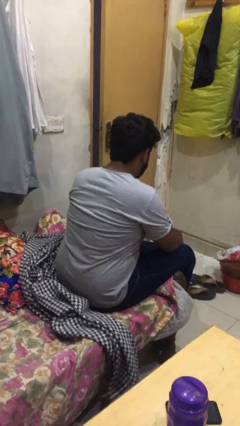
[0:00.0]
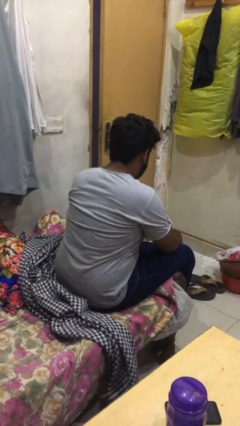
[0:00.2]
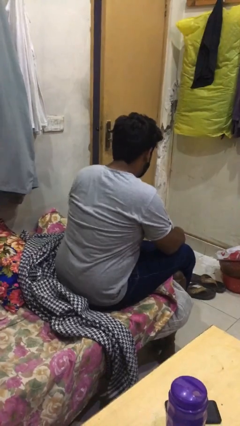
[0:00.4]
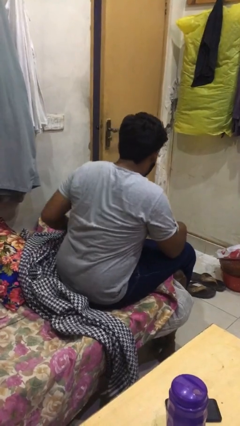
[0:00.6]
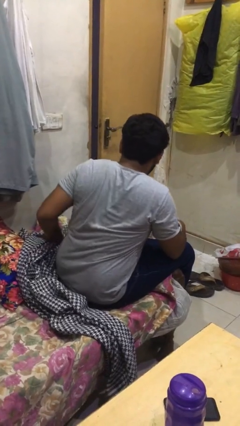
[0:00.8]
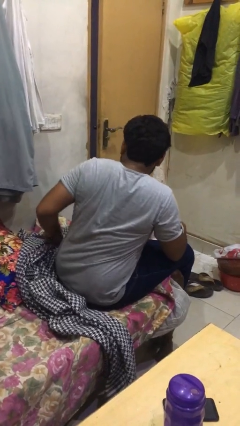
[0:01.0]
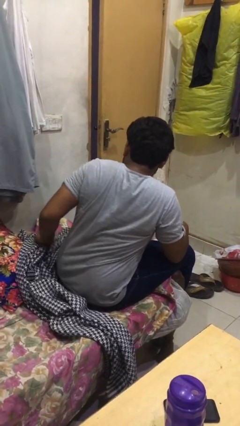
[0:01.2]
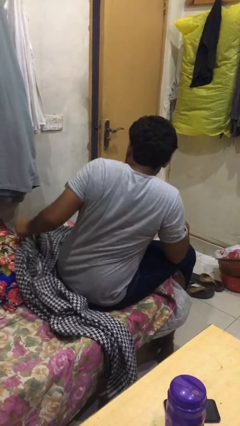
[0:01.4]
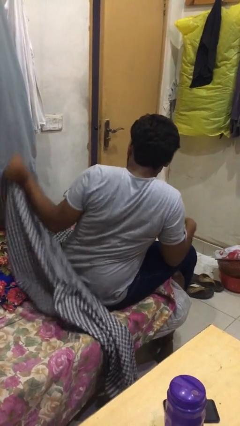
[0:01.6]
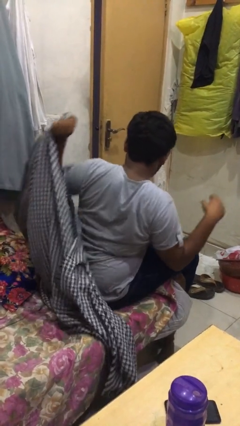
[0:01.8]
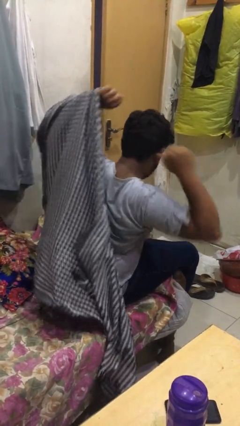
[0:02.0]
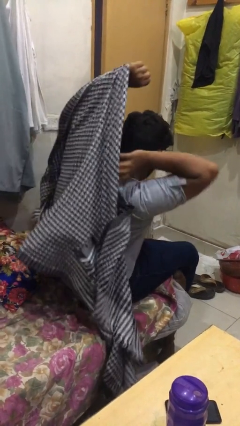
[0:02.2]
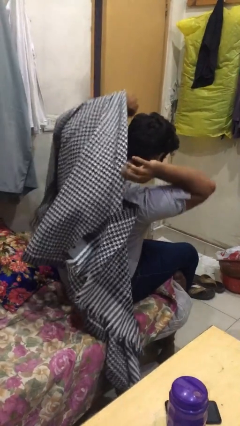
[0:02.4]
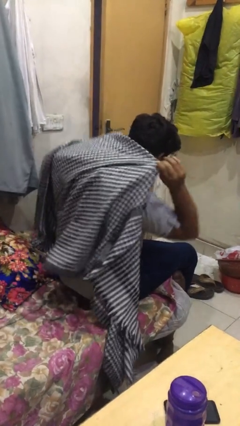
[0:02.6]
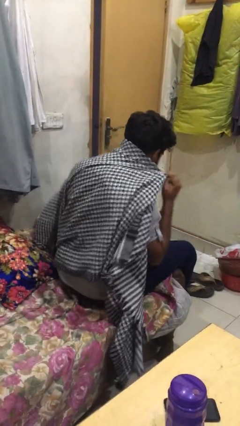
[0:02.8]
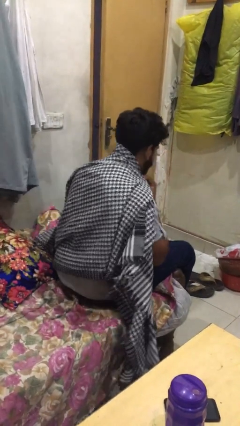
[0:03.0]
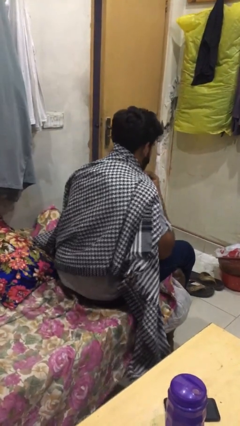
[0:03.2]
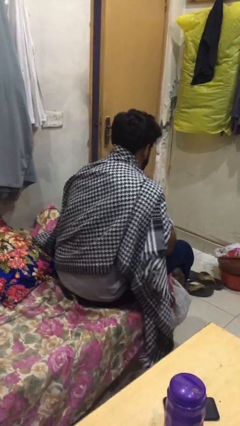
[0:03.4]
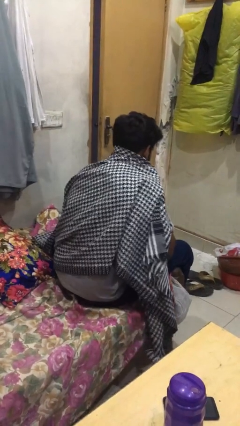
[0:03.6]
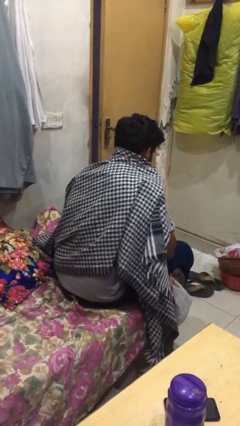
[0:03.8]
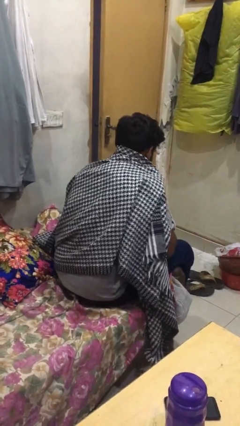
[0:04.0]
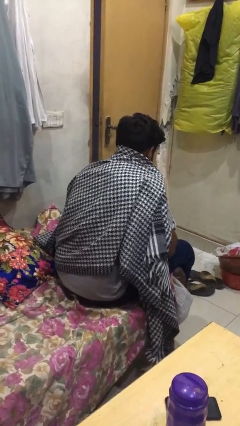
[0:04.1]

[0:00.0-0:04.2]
person covers with blanket

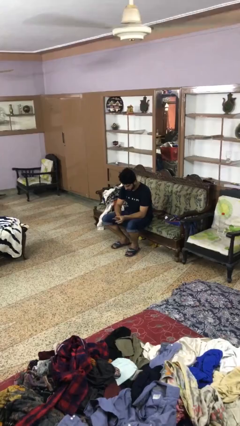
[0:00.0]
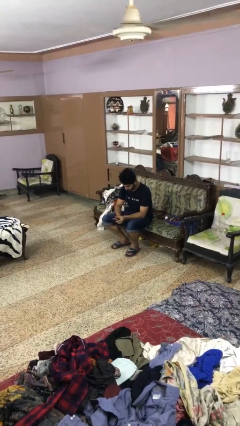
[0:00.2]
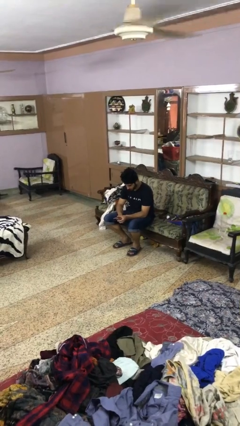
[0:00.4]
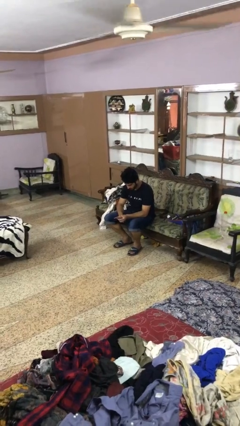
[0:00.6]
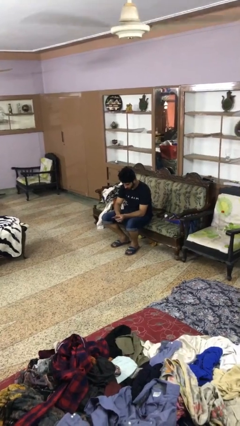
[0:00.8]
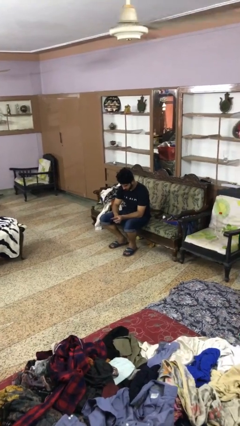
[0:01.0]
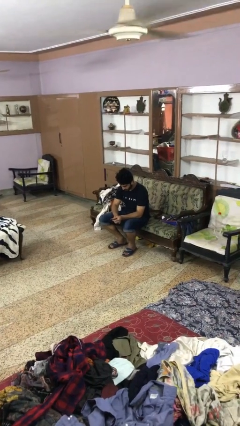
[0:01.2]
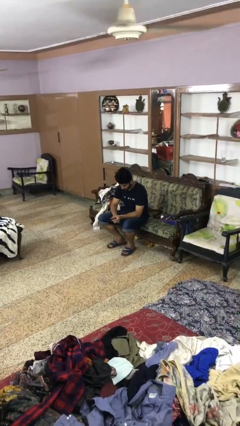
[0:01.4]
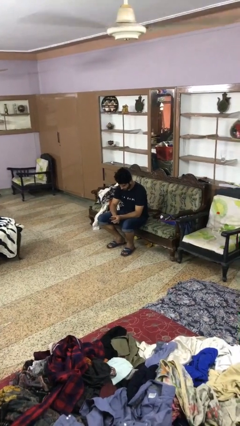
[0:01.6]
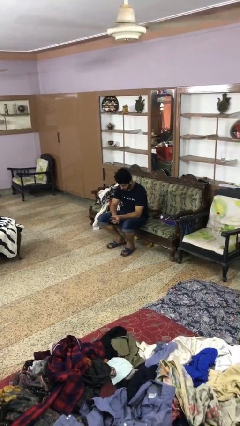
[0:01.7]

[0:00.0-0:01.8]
person clips fingernails

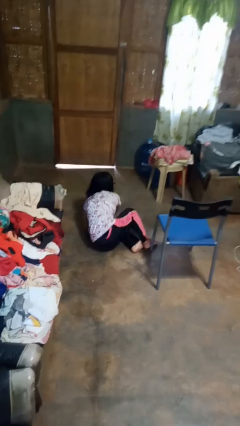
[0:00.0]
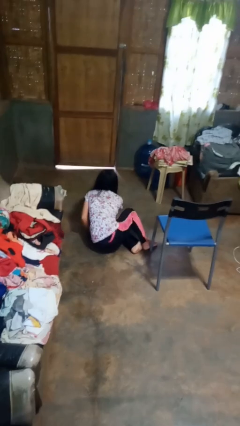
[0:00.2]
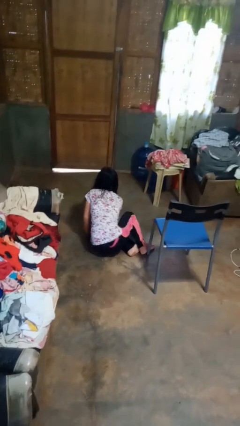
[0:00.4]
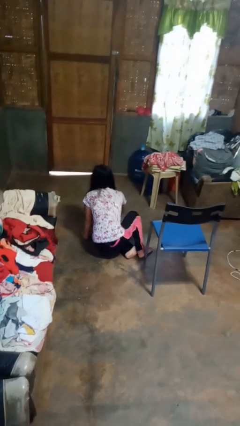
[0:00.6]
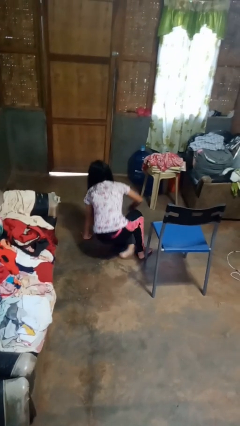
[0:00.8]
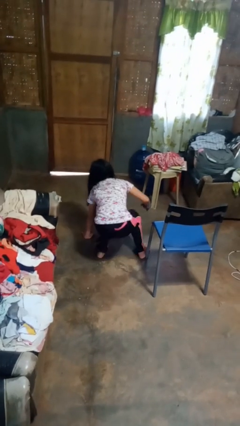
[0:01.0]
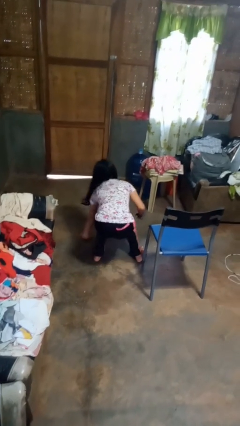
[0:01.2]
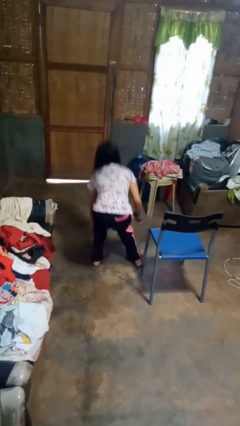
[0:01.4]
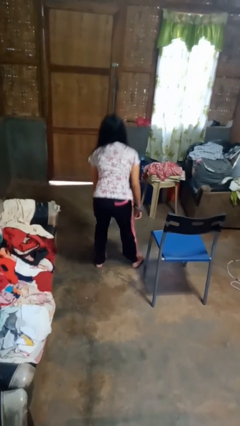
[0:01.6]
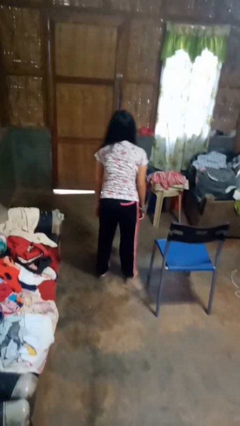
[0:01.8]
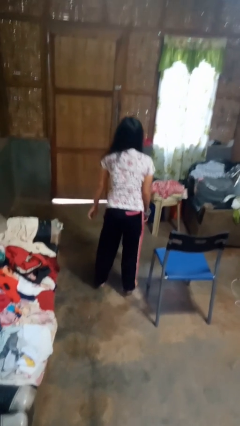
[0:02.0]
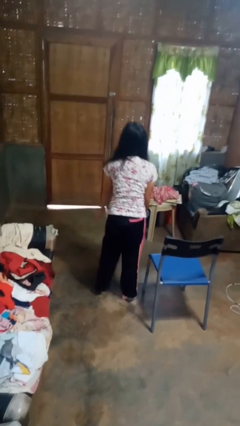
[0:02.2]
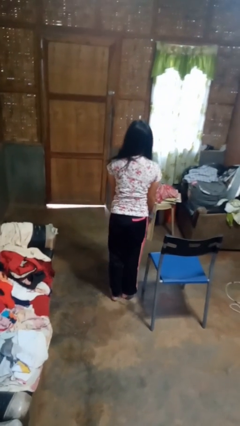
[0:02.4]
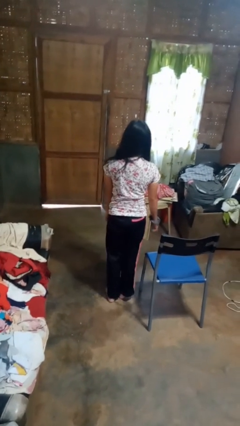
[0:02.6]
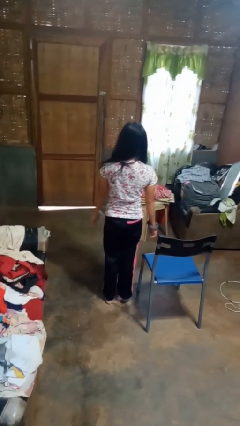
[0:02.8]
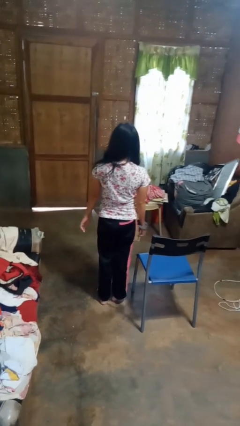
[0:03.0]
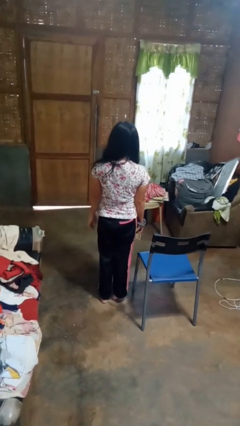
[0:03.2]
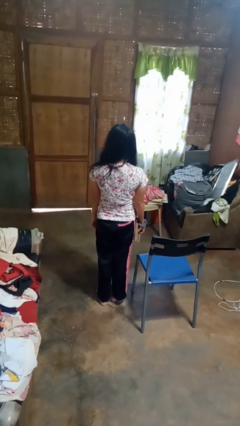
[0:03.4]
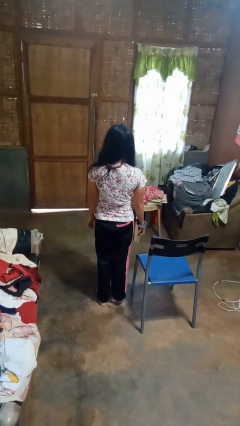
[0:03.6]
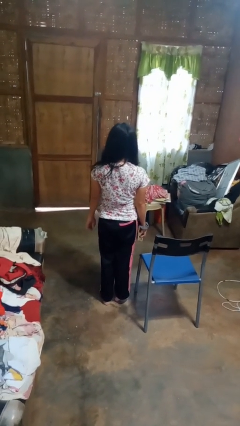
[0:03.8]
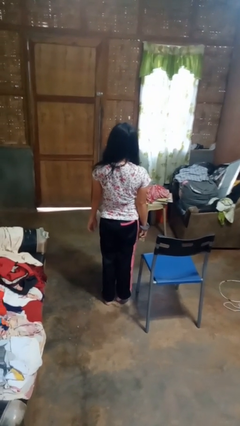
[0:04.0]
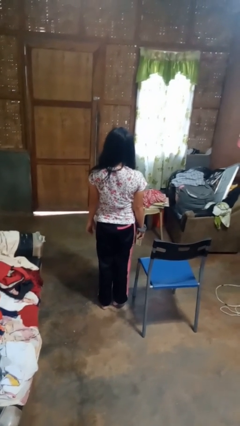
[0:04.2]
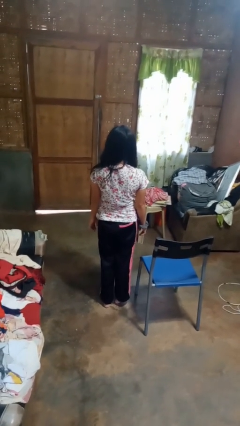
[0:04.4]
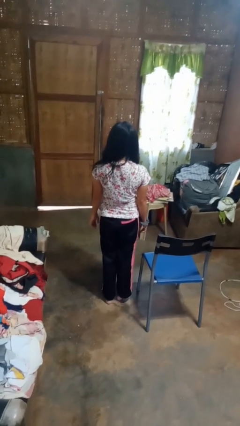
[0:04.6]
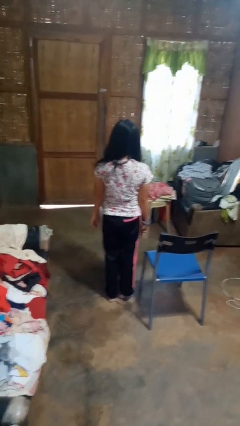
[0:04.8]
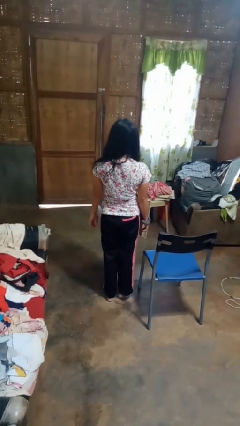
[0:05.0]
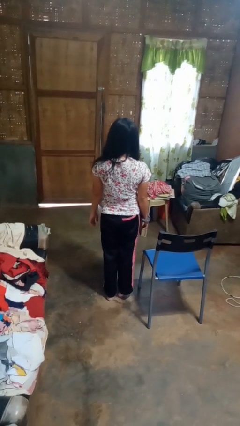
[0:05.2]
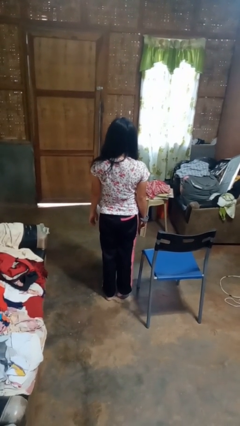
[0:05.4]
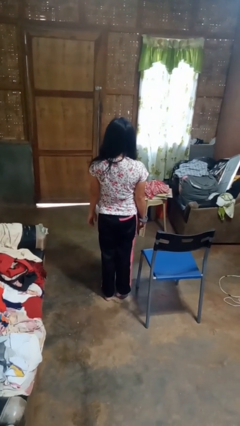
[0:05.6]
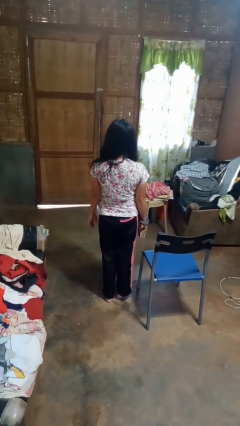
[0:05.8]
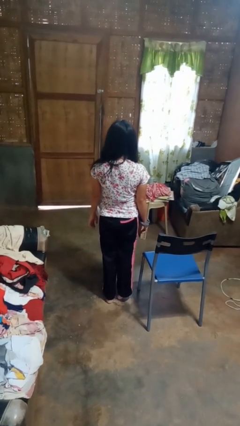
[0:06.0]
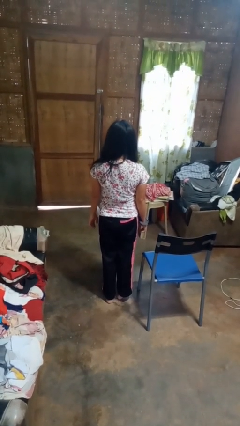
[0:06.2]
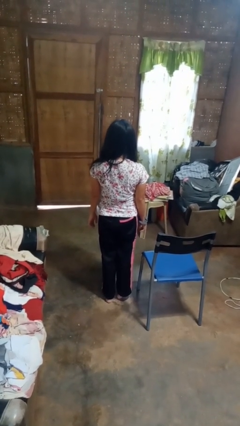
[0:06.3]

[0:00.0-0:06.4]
person stands up from floor

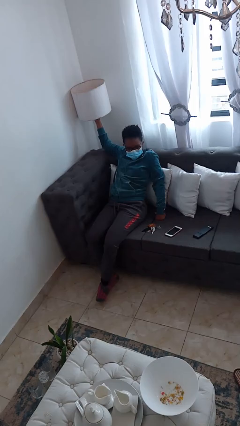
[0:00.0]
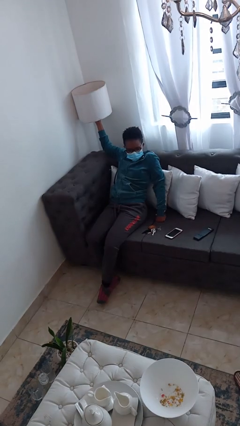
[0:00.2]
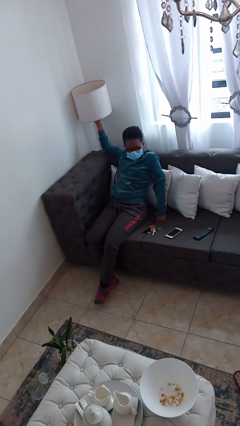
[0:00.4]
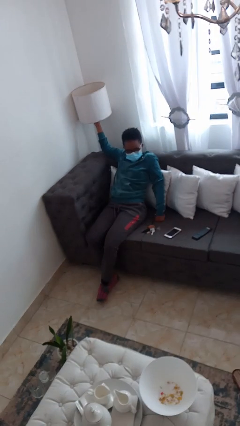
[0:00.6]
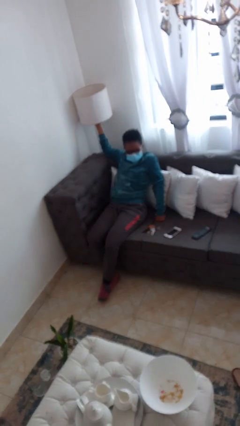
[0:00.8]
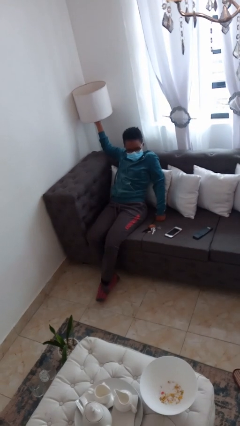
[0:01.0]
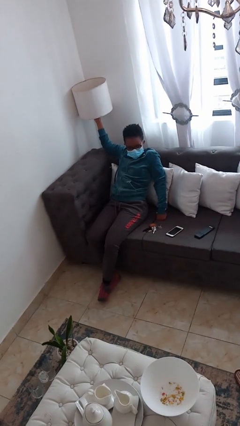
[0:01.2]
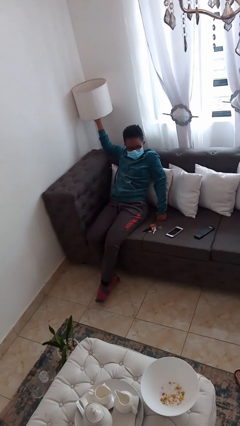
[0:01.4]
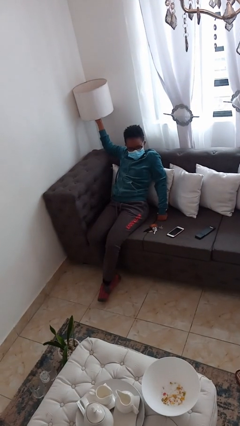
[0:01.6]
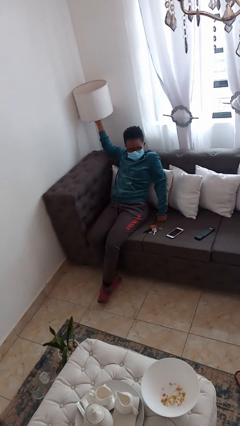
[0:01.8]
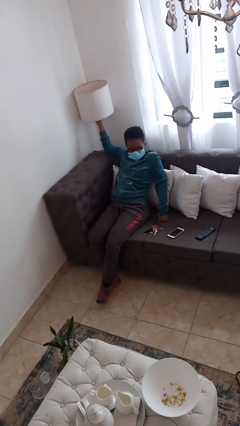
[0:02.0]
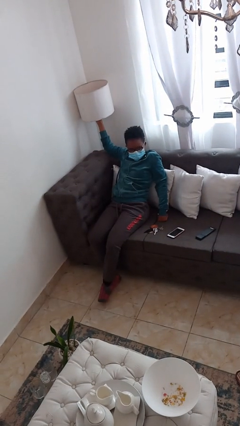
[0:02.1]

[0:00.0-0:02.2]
person turns off lamp

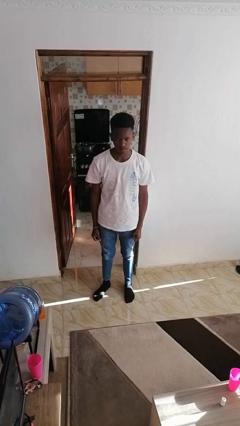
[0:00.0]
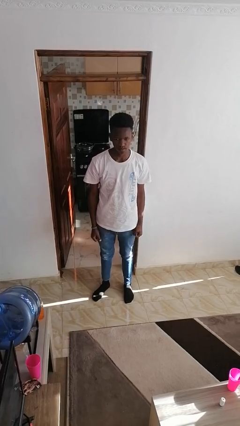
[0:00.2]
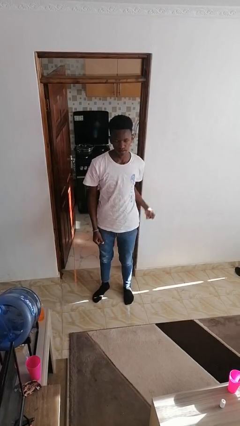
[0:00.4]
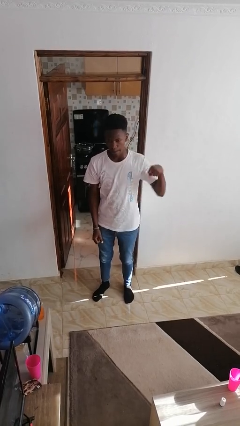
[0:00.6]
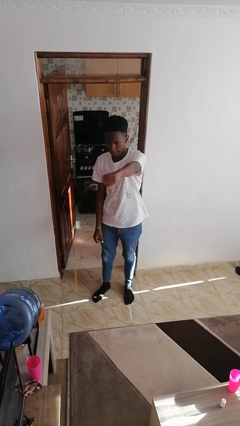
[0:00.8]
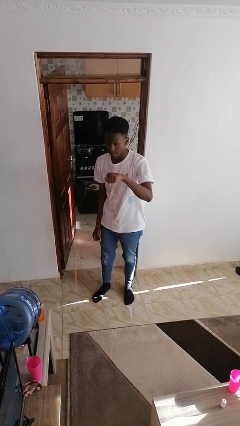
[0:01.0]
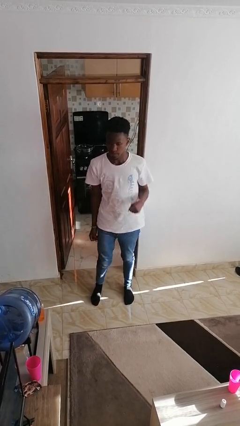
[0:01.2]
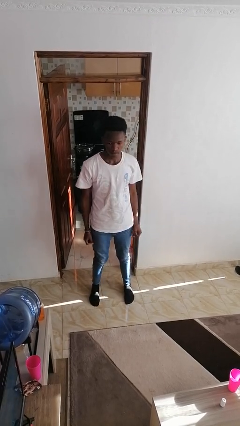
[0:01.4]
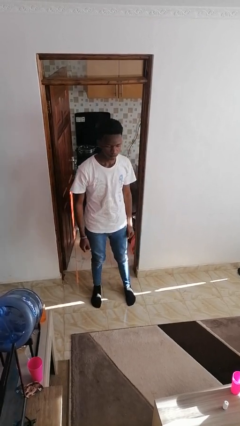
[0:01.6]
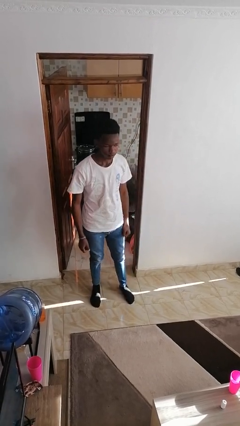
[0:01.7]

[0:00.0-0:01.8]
person punches

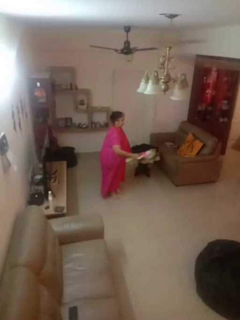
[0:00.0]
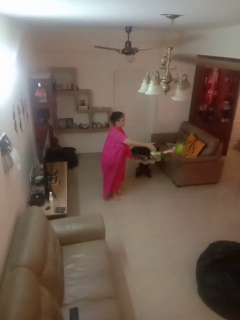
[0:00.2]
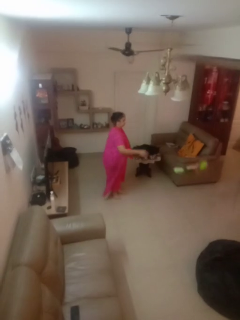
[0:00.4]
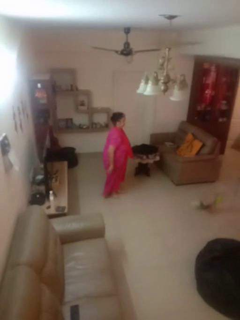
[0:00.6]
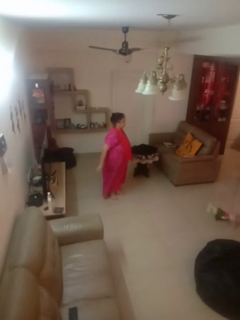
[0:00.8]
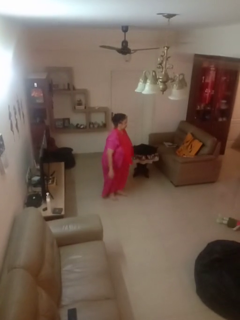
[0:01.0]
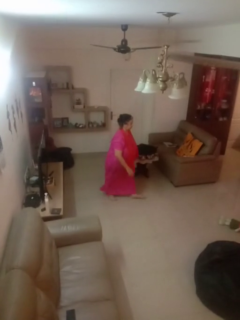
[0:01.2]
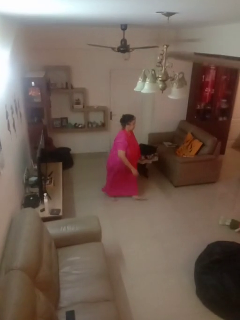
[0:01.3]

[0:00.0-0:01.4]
person throws object to ground
